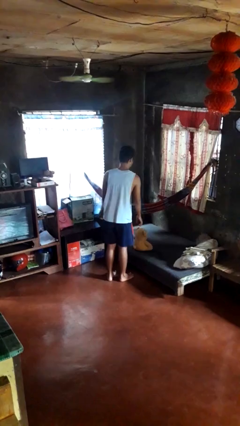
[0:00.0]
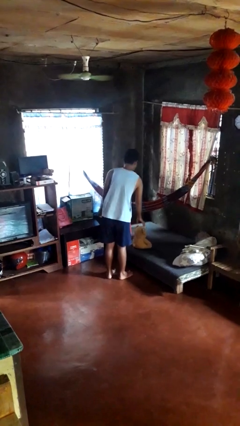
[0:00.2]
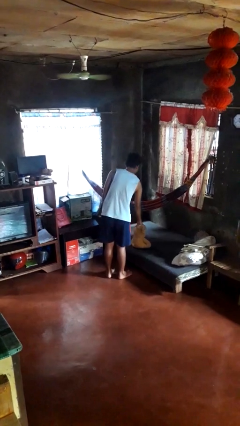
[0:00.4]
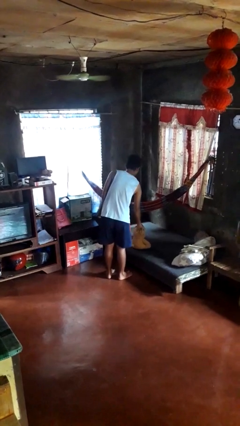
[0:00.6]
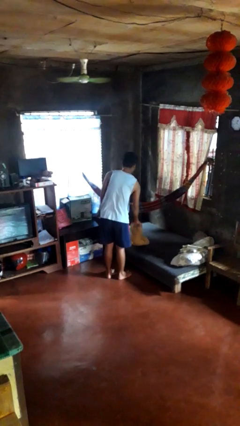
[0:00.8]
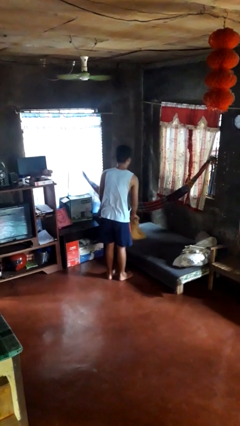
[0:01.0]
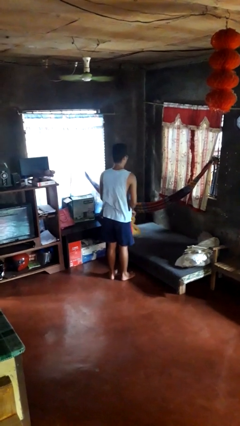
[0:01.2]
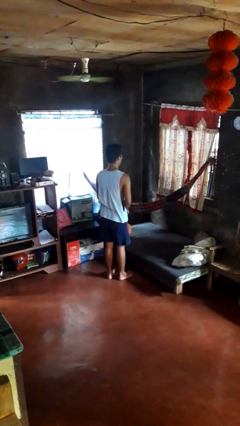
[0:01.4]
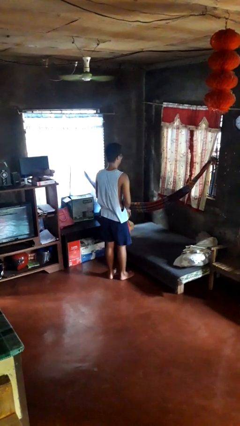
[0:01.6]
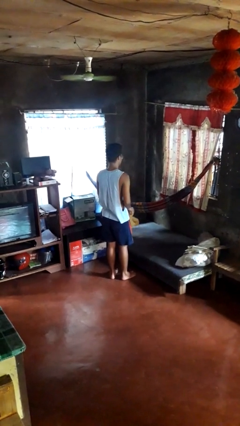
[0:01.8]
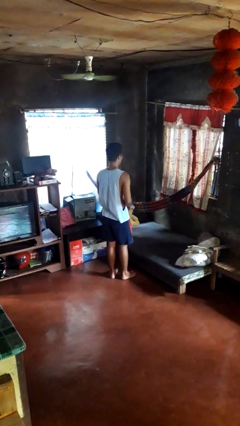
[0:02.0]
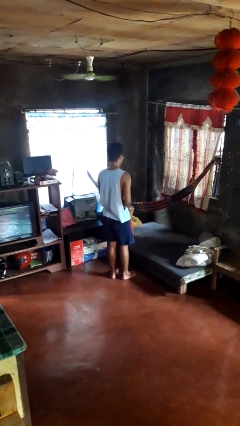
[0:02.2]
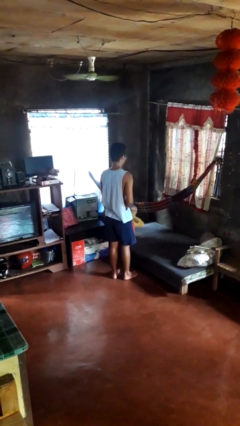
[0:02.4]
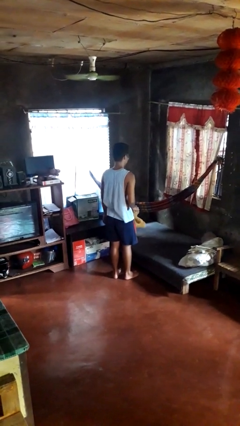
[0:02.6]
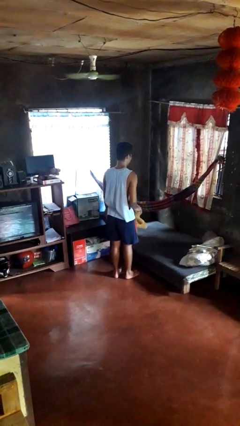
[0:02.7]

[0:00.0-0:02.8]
person picks up object from bed

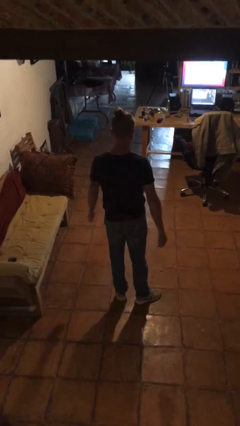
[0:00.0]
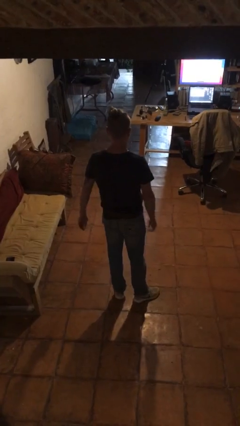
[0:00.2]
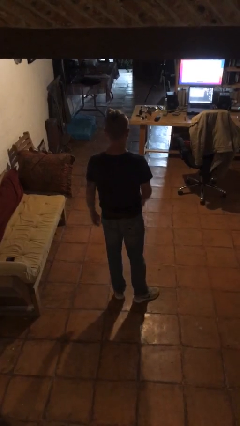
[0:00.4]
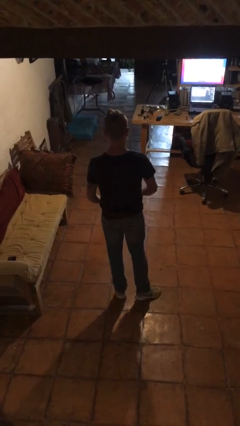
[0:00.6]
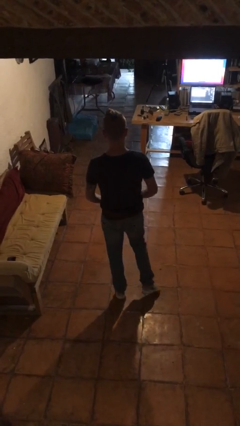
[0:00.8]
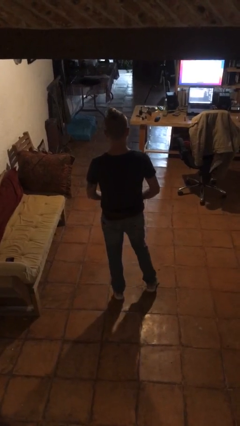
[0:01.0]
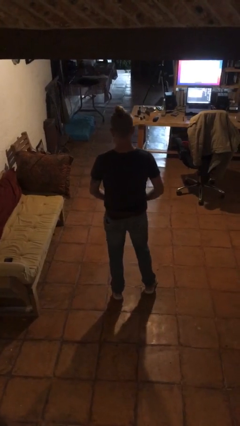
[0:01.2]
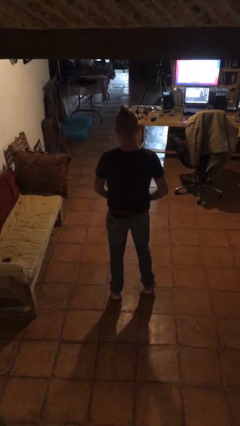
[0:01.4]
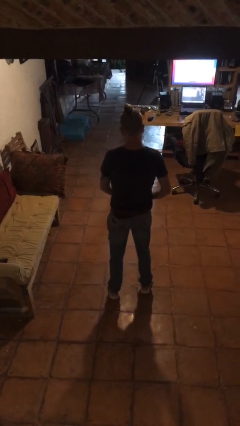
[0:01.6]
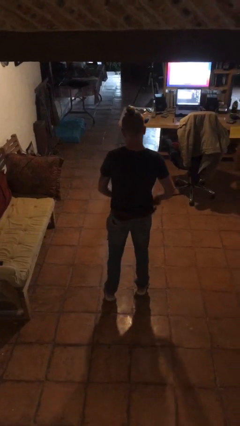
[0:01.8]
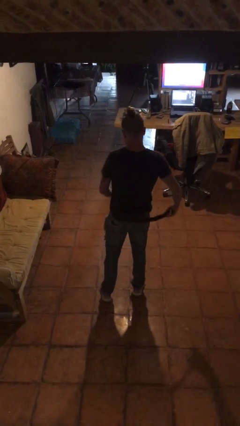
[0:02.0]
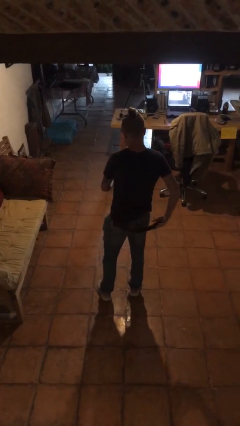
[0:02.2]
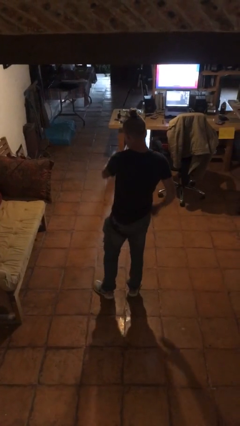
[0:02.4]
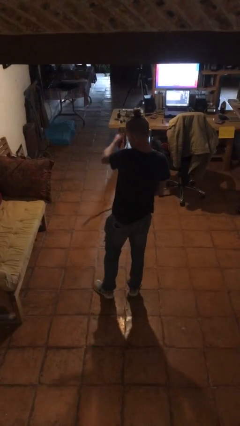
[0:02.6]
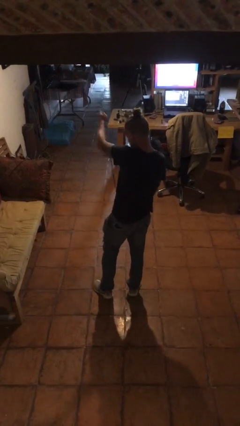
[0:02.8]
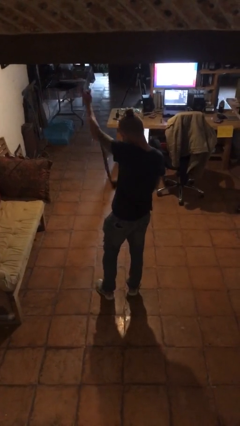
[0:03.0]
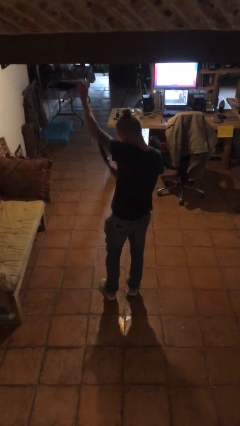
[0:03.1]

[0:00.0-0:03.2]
person takes off belt

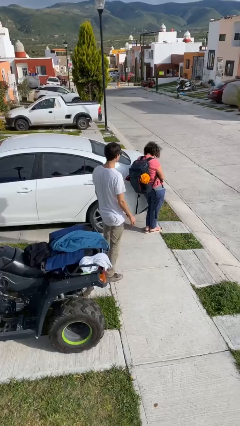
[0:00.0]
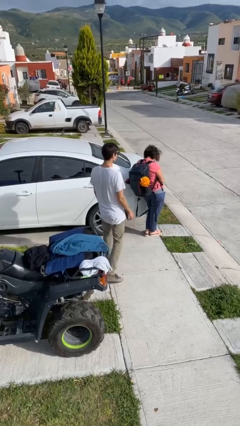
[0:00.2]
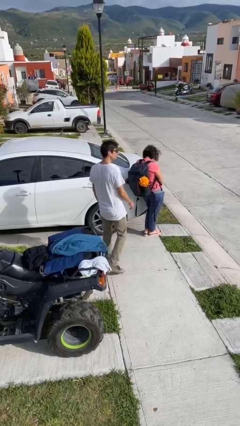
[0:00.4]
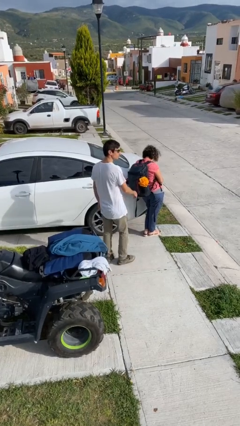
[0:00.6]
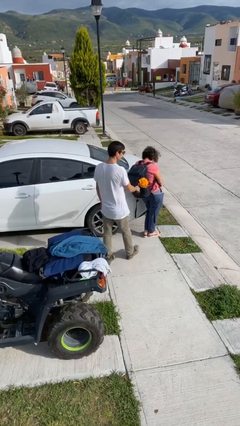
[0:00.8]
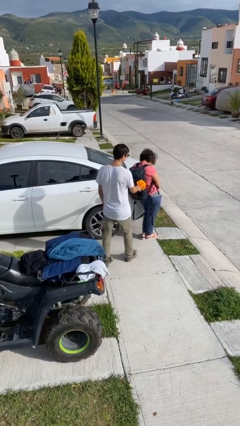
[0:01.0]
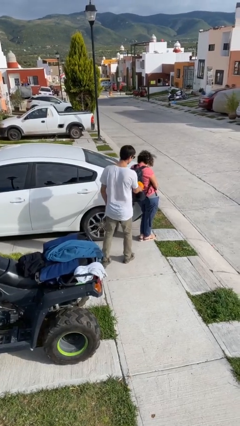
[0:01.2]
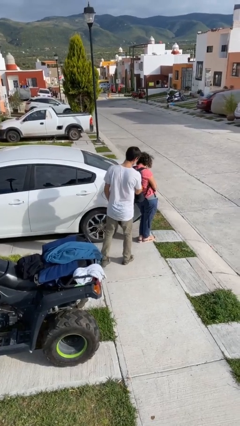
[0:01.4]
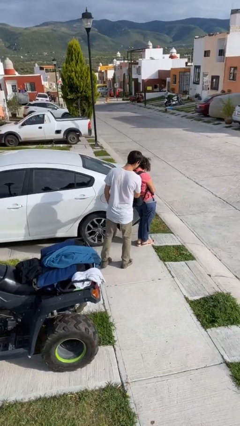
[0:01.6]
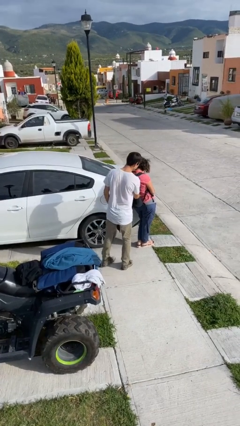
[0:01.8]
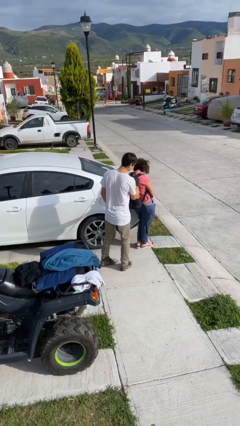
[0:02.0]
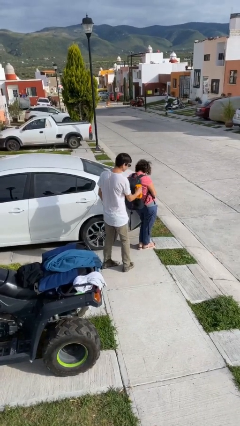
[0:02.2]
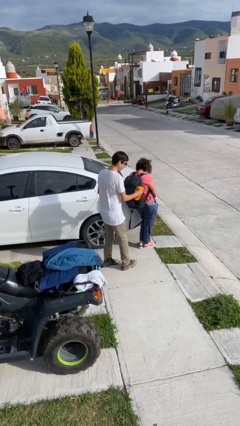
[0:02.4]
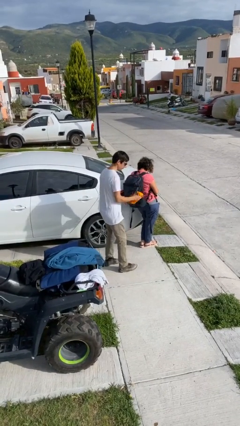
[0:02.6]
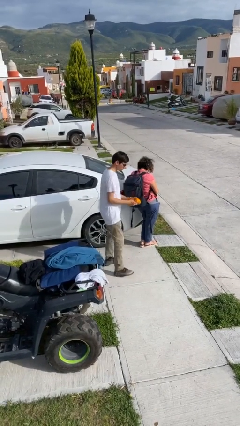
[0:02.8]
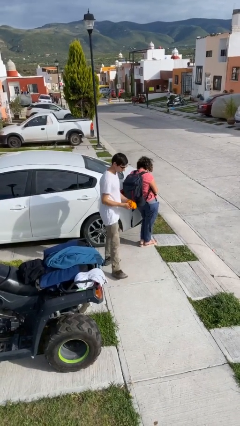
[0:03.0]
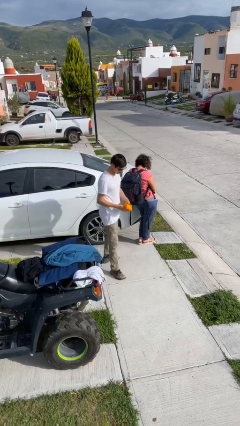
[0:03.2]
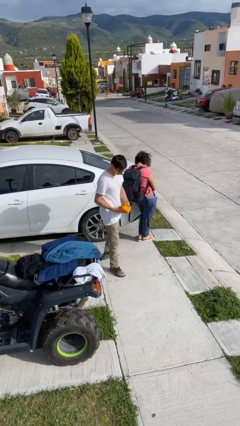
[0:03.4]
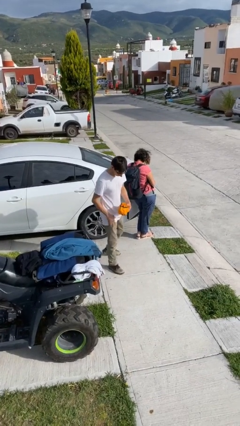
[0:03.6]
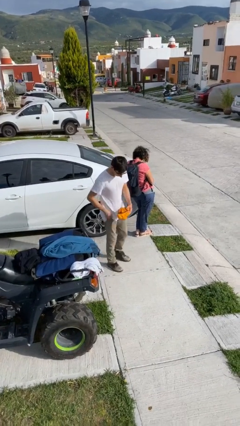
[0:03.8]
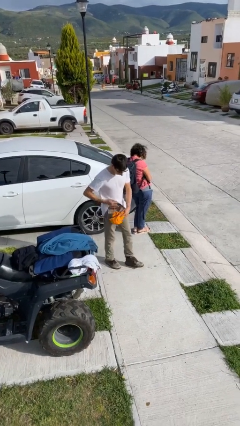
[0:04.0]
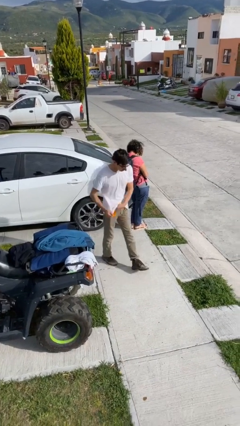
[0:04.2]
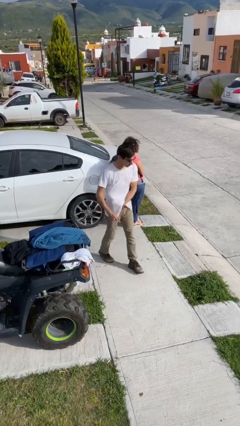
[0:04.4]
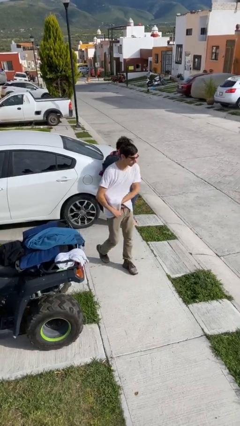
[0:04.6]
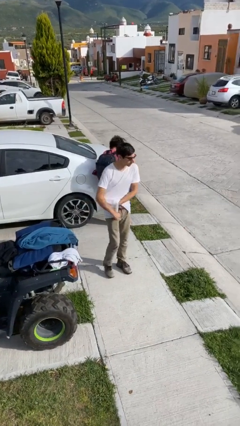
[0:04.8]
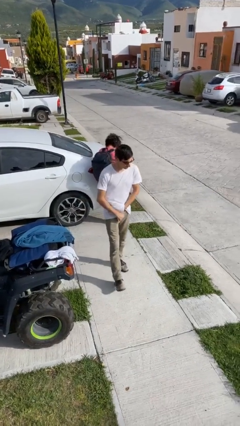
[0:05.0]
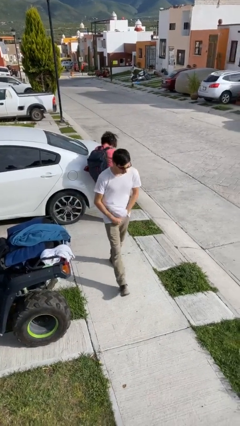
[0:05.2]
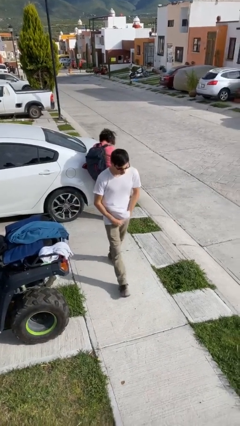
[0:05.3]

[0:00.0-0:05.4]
person steals object from person

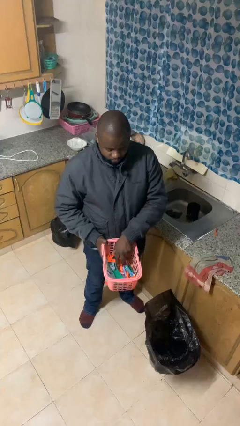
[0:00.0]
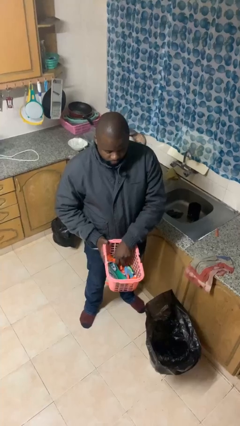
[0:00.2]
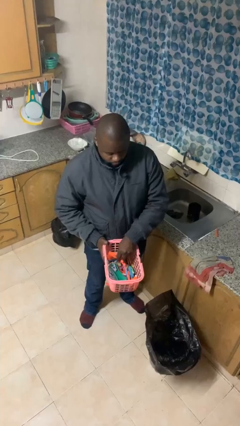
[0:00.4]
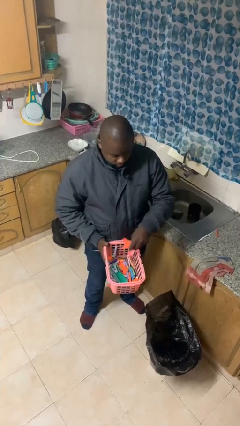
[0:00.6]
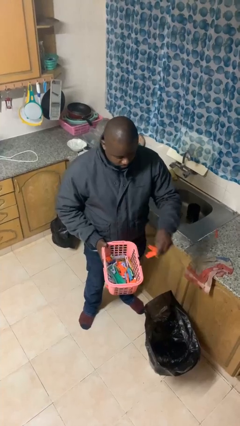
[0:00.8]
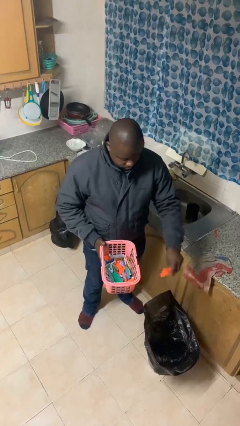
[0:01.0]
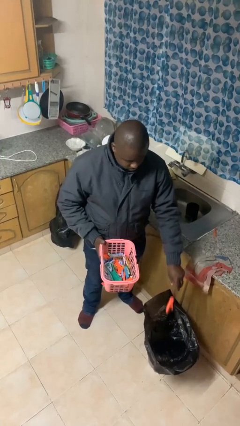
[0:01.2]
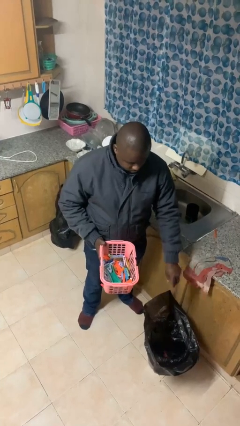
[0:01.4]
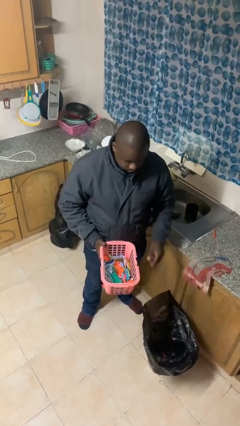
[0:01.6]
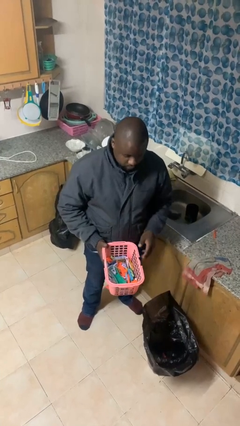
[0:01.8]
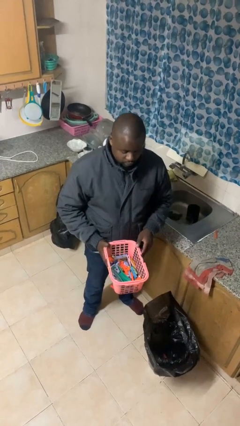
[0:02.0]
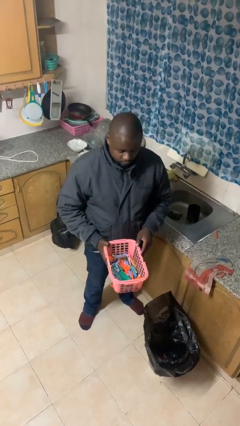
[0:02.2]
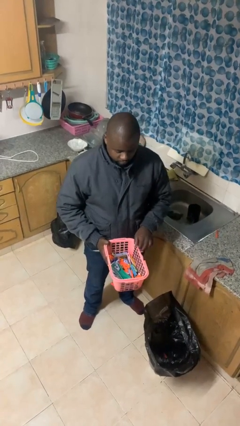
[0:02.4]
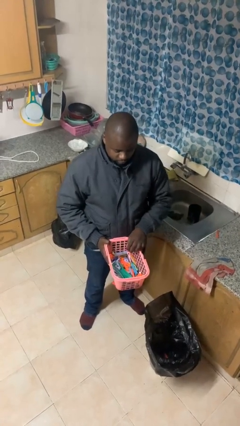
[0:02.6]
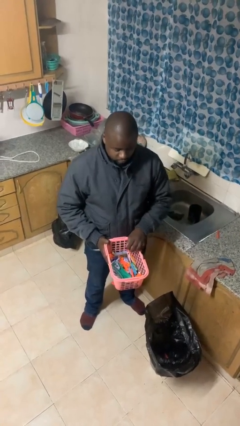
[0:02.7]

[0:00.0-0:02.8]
person discards trash

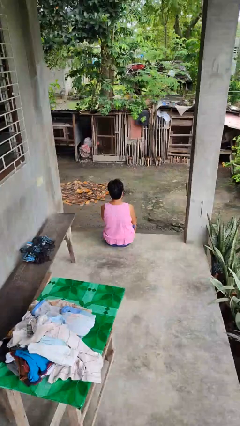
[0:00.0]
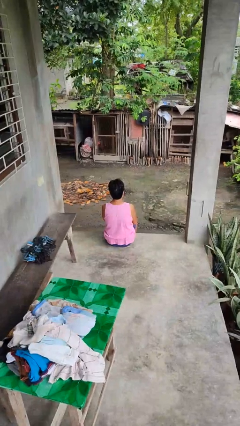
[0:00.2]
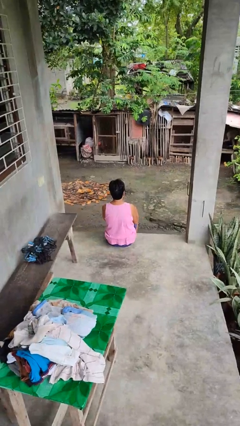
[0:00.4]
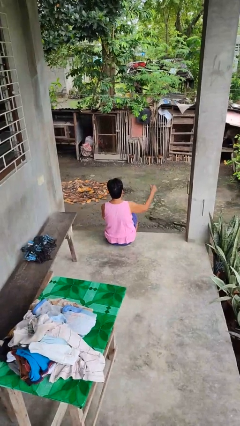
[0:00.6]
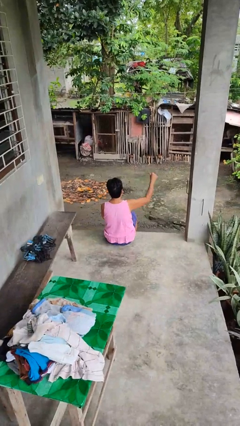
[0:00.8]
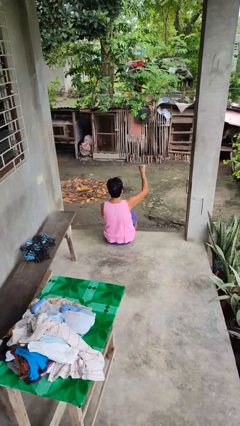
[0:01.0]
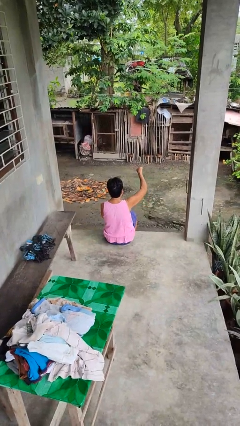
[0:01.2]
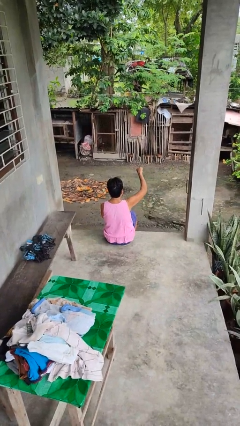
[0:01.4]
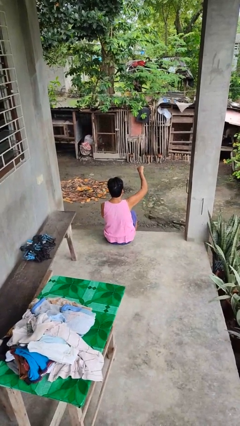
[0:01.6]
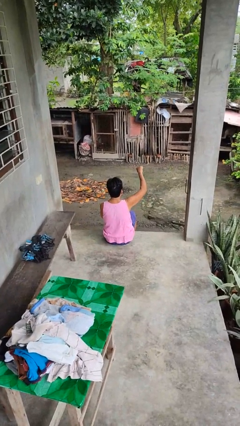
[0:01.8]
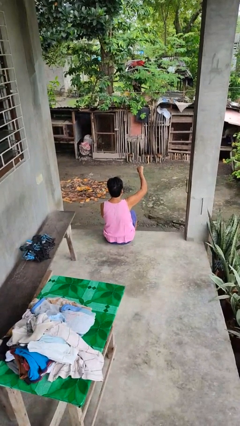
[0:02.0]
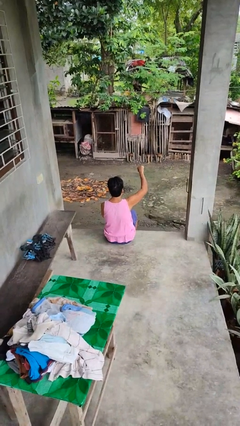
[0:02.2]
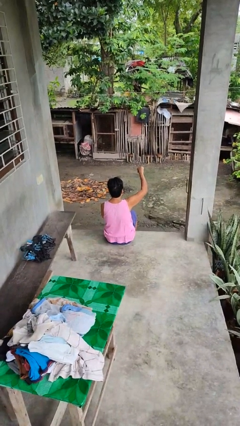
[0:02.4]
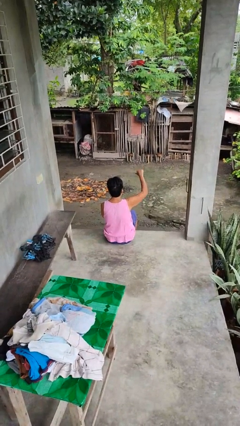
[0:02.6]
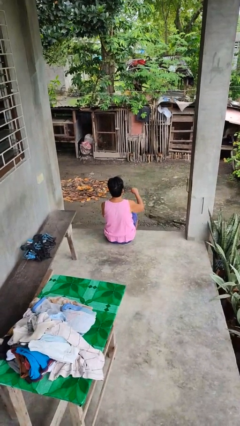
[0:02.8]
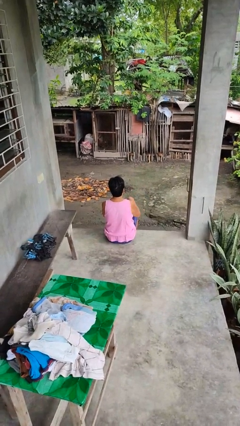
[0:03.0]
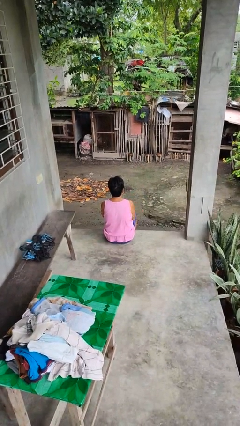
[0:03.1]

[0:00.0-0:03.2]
person gestures thumbs down

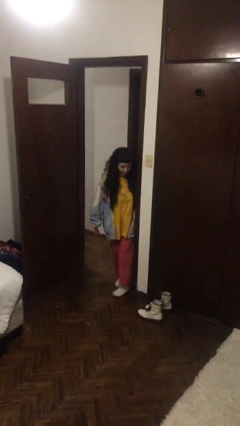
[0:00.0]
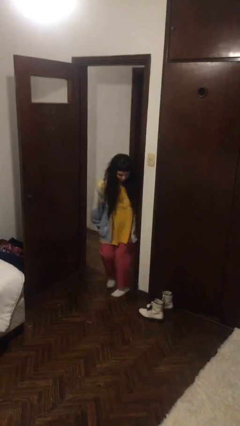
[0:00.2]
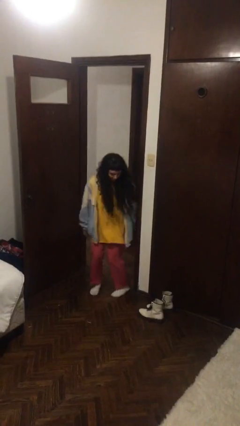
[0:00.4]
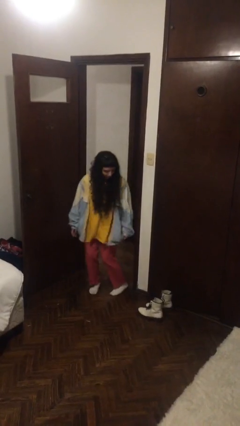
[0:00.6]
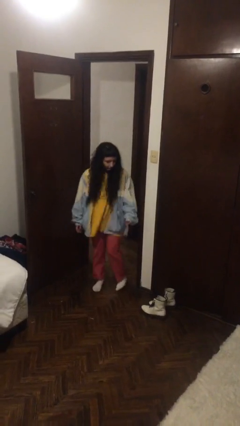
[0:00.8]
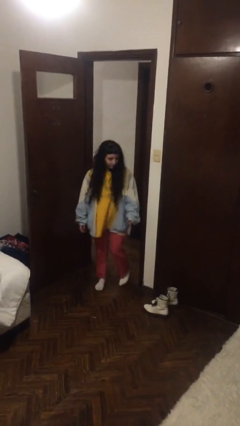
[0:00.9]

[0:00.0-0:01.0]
person bumps into wall
